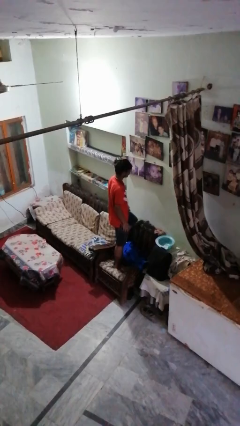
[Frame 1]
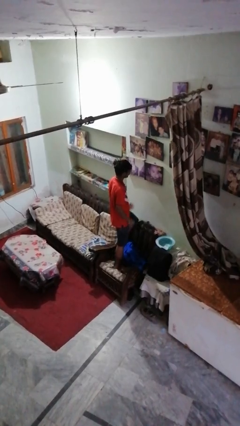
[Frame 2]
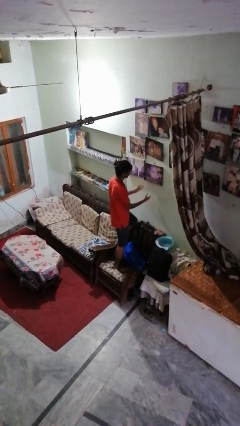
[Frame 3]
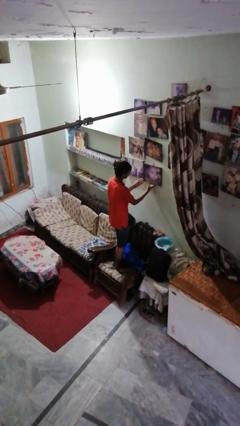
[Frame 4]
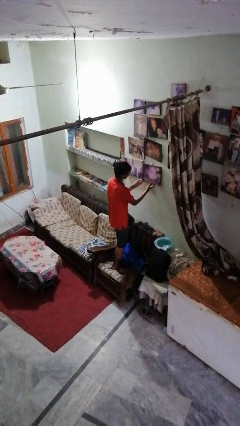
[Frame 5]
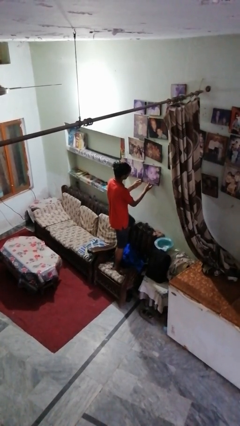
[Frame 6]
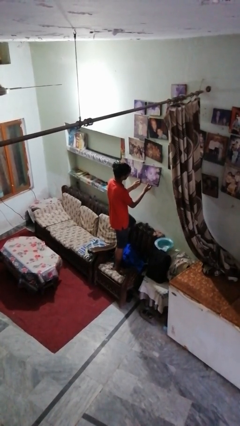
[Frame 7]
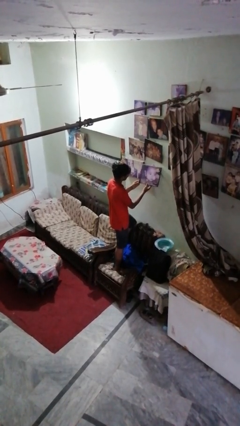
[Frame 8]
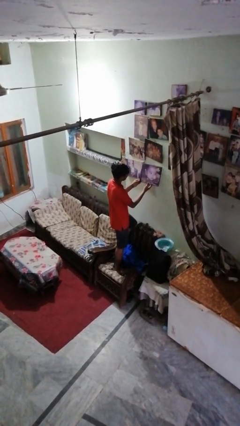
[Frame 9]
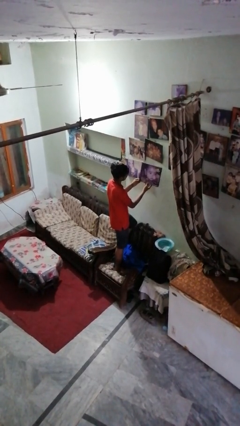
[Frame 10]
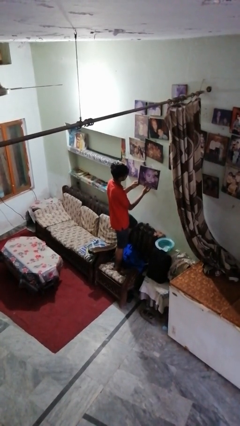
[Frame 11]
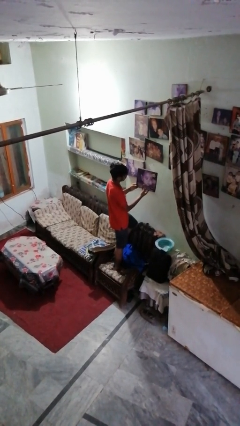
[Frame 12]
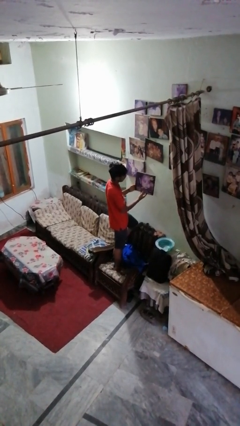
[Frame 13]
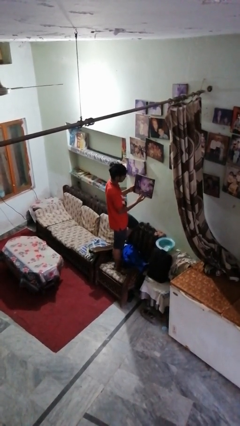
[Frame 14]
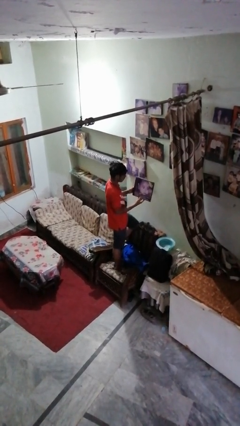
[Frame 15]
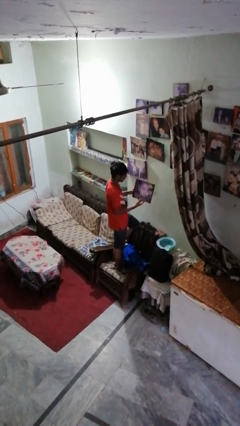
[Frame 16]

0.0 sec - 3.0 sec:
person takes down picture frame

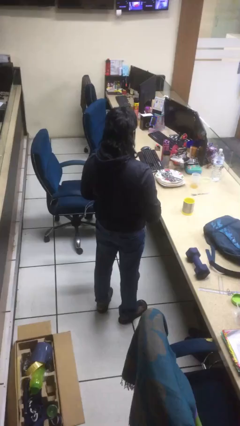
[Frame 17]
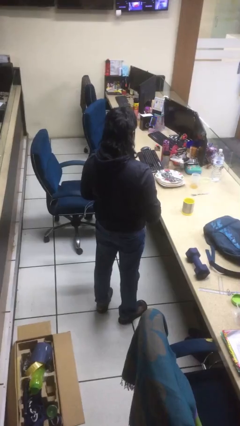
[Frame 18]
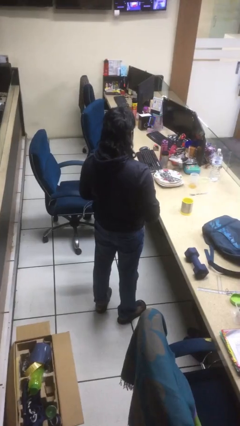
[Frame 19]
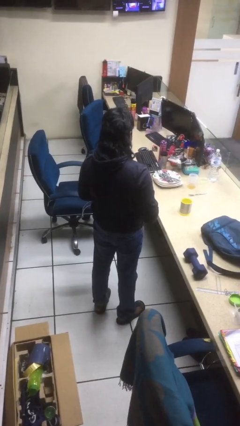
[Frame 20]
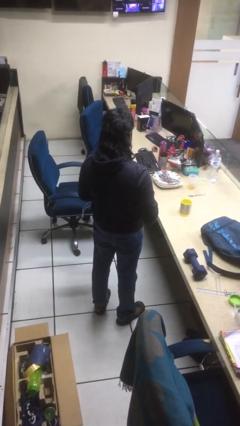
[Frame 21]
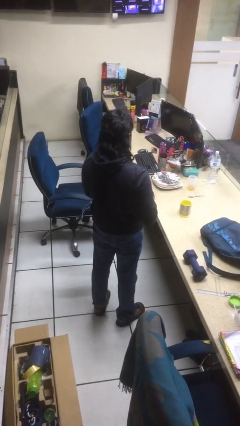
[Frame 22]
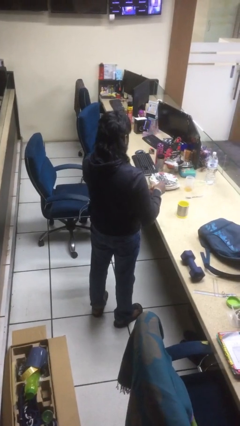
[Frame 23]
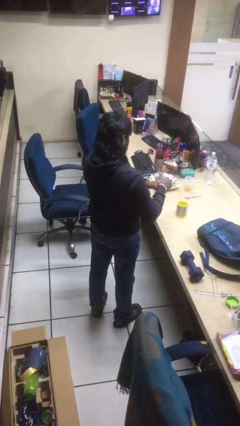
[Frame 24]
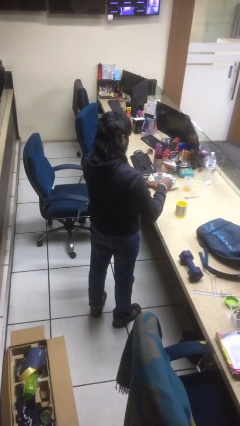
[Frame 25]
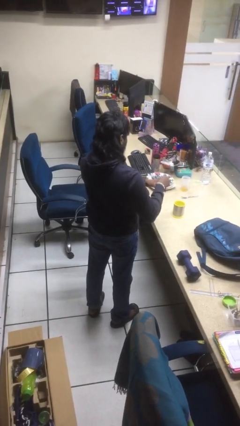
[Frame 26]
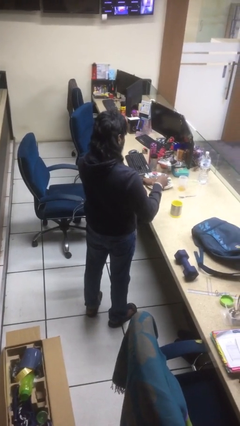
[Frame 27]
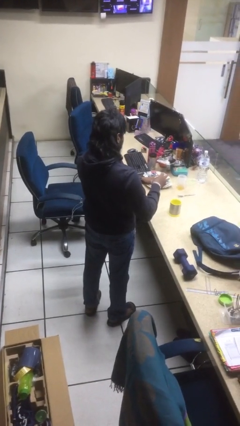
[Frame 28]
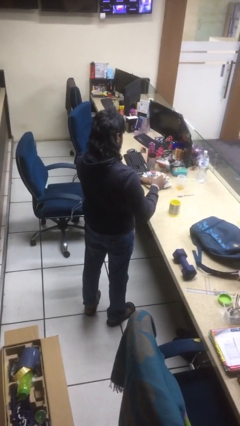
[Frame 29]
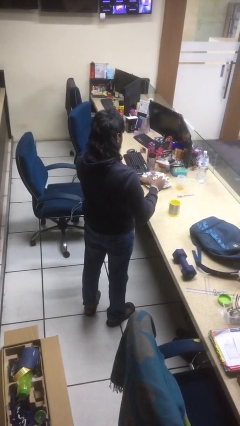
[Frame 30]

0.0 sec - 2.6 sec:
person opens beverage can

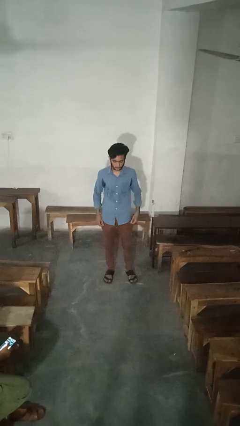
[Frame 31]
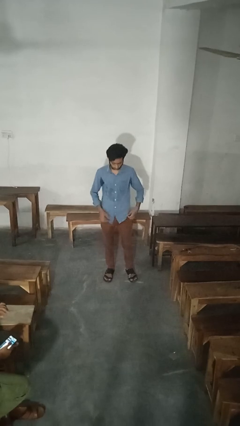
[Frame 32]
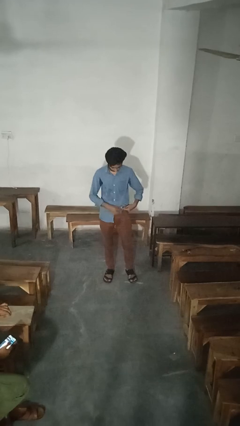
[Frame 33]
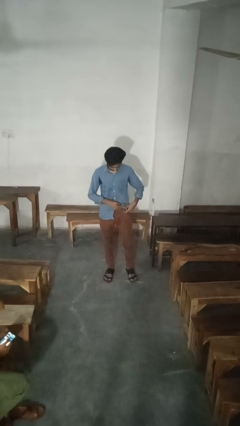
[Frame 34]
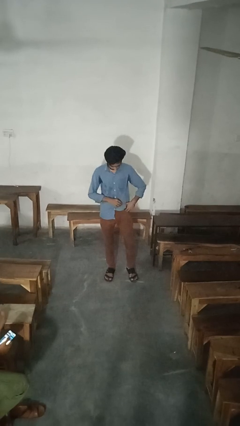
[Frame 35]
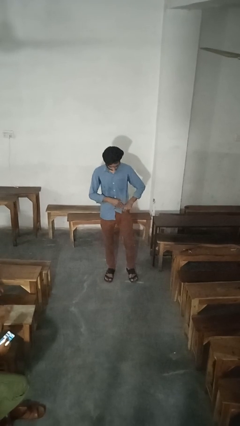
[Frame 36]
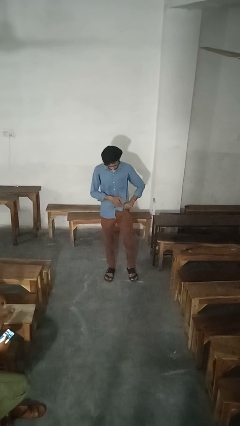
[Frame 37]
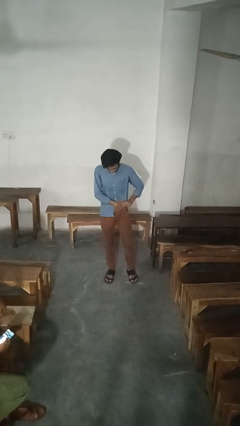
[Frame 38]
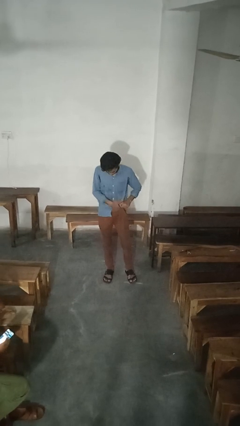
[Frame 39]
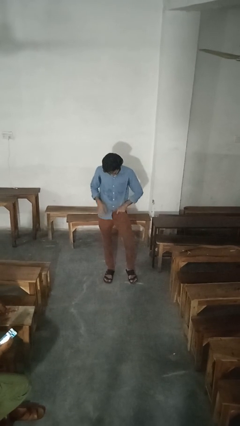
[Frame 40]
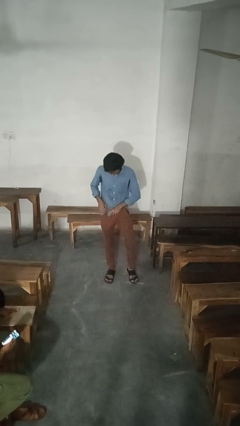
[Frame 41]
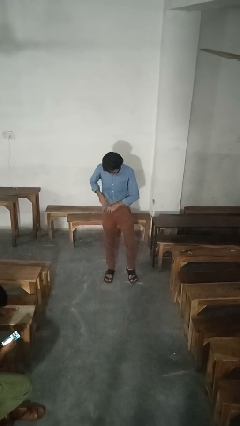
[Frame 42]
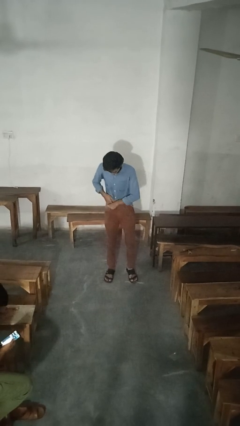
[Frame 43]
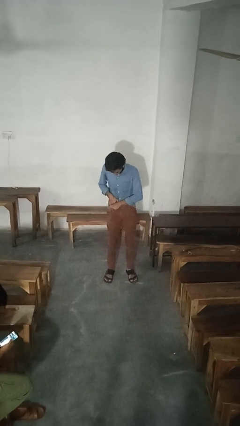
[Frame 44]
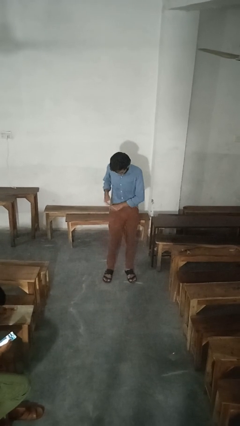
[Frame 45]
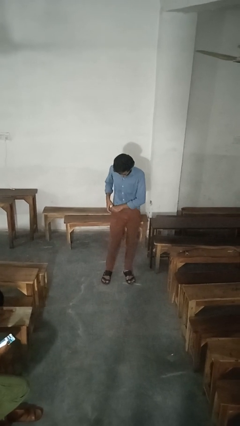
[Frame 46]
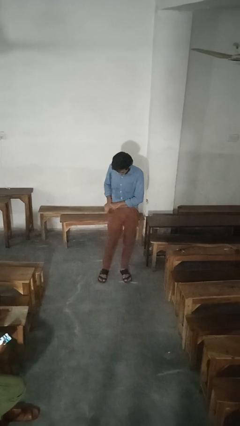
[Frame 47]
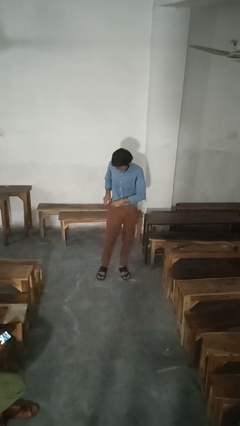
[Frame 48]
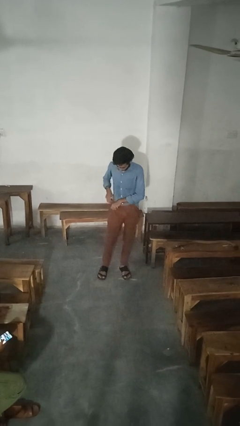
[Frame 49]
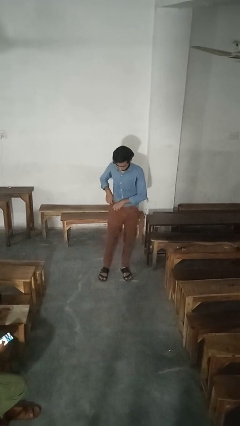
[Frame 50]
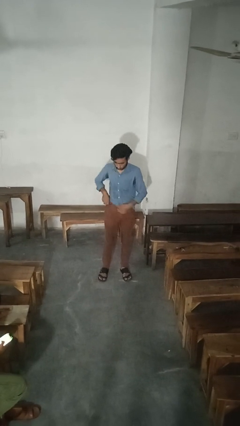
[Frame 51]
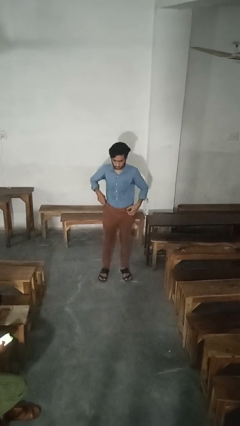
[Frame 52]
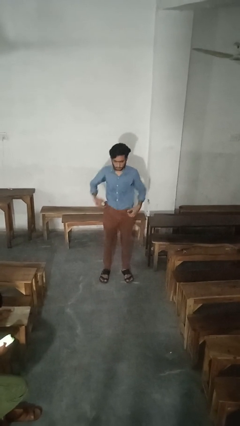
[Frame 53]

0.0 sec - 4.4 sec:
person tucks in shirt

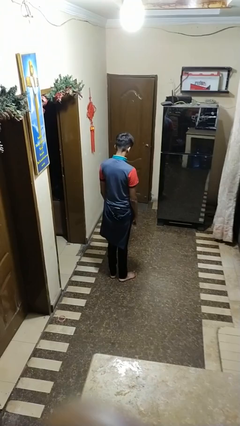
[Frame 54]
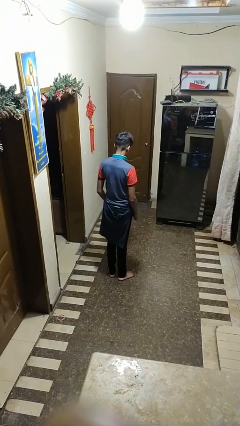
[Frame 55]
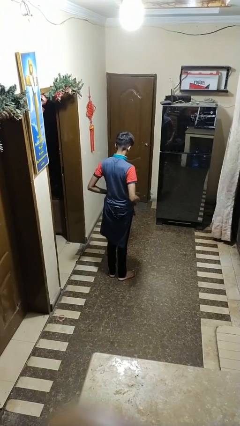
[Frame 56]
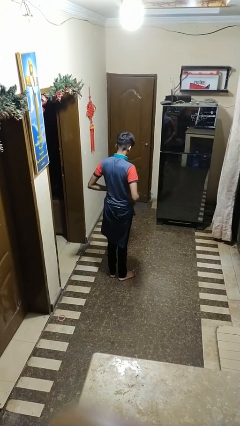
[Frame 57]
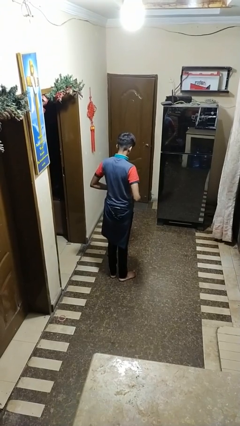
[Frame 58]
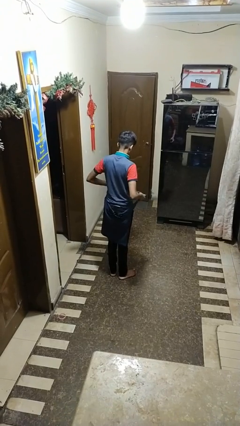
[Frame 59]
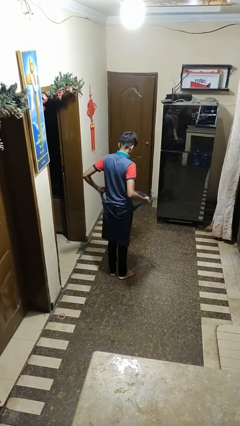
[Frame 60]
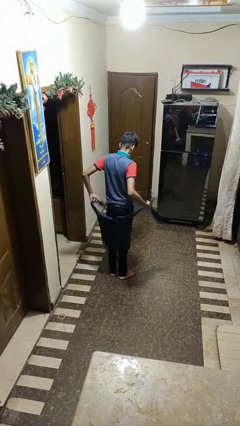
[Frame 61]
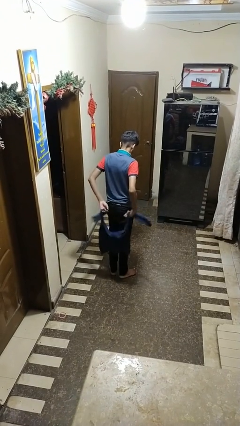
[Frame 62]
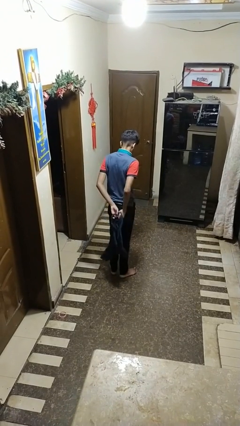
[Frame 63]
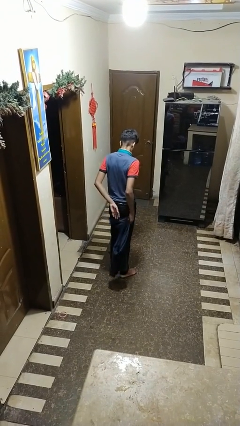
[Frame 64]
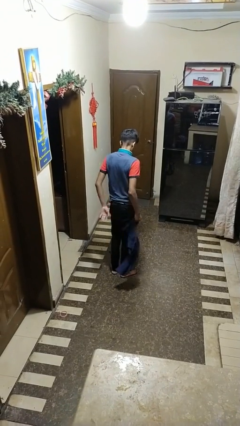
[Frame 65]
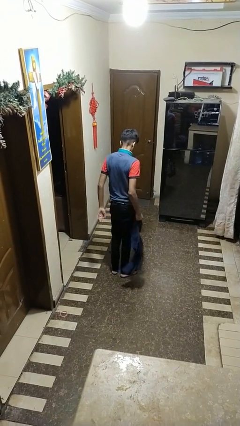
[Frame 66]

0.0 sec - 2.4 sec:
person unties jacket around waist

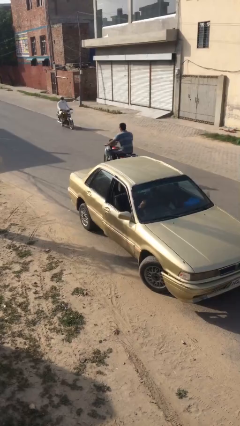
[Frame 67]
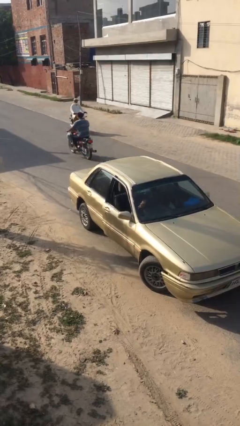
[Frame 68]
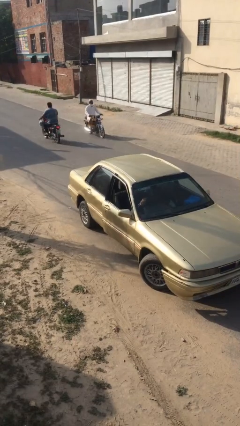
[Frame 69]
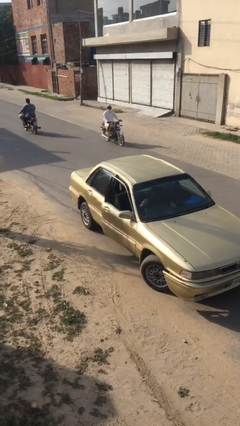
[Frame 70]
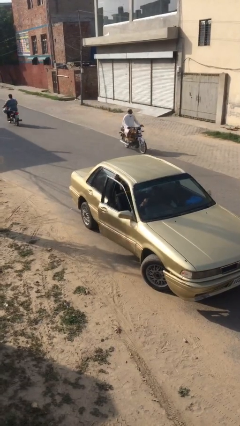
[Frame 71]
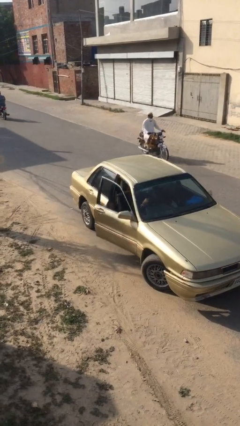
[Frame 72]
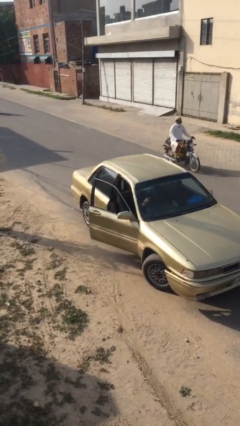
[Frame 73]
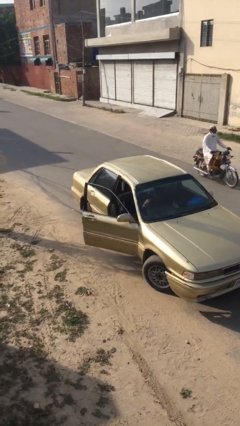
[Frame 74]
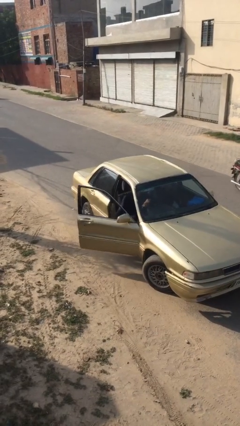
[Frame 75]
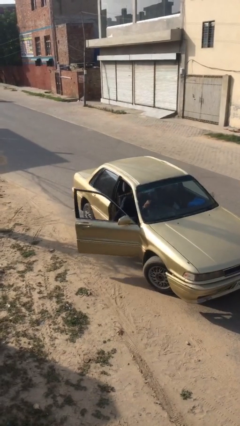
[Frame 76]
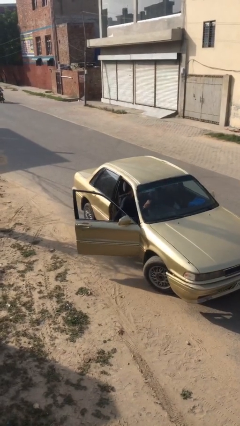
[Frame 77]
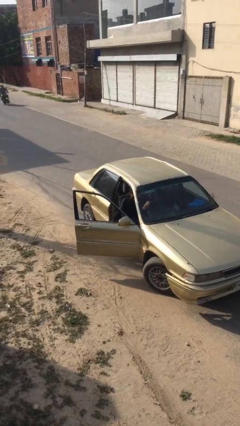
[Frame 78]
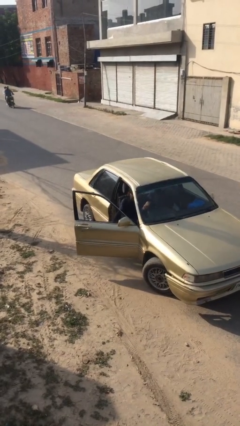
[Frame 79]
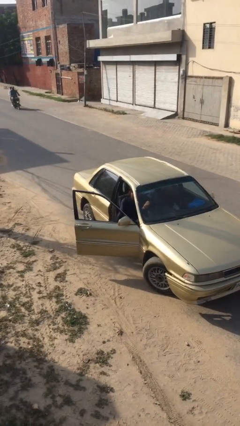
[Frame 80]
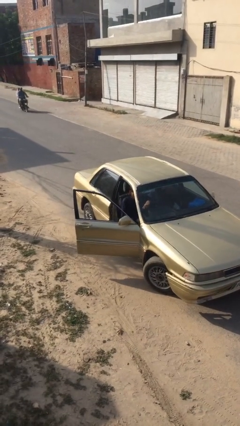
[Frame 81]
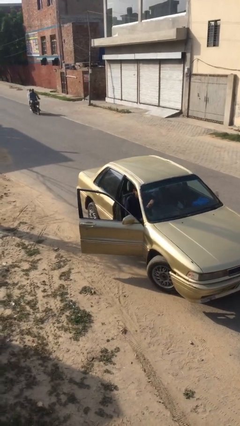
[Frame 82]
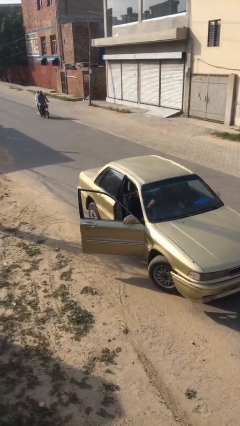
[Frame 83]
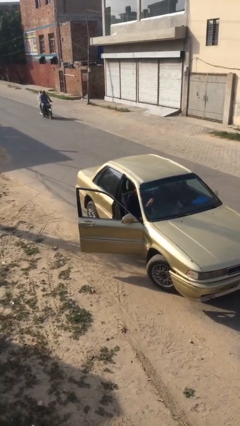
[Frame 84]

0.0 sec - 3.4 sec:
person opens car door

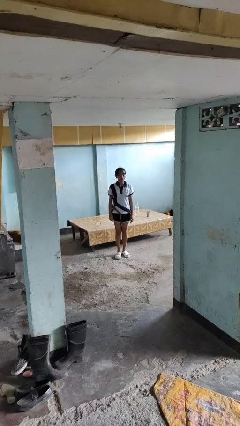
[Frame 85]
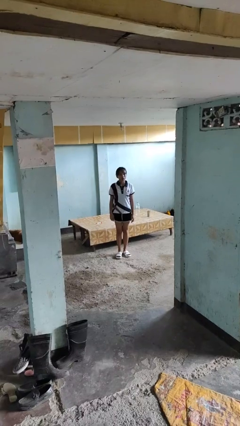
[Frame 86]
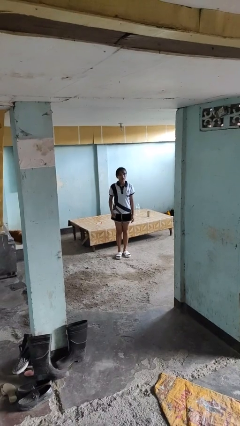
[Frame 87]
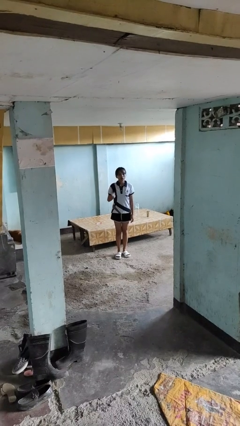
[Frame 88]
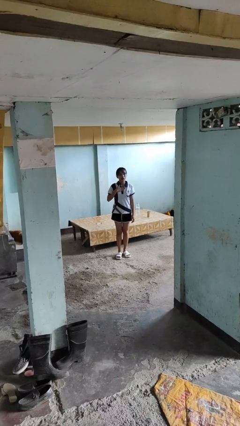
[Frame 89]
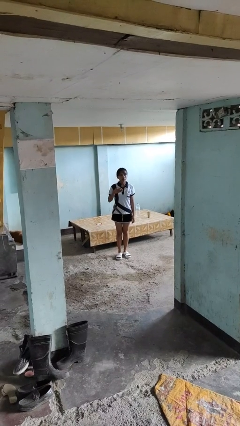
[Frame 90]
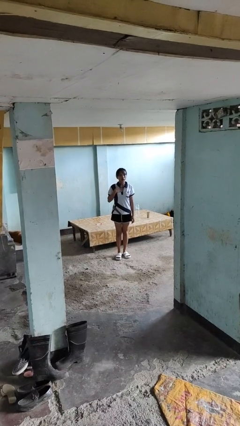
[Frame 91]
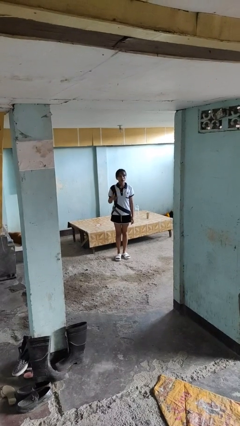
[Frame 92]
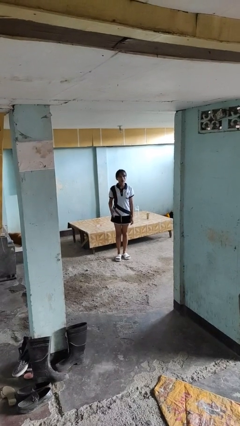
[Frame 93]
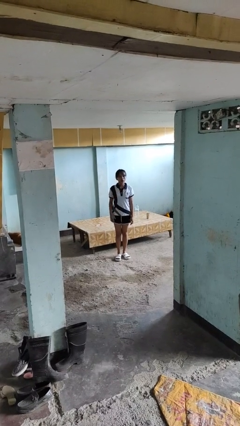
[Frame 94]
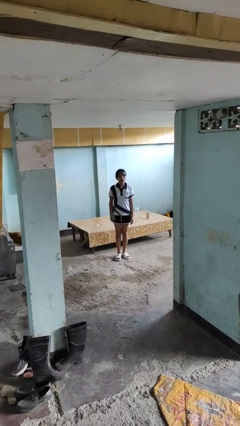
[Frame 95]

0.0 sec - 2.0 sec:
person drums on chest
